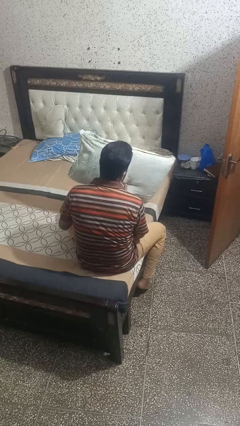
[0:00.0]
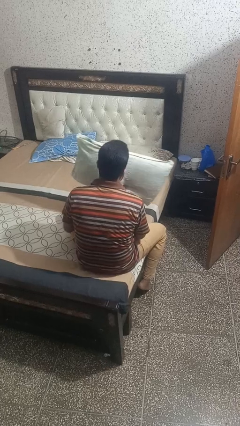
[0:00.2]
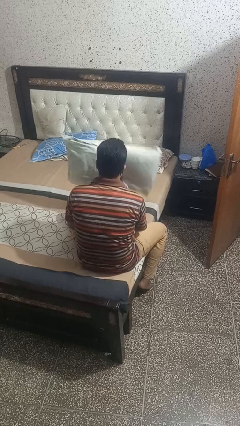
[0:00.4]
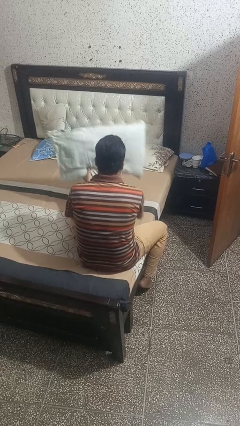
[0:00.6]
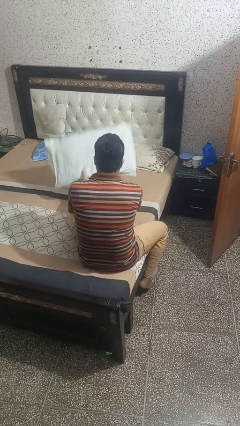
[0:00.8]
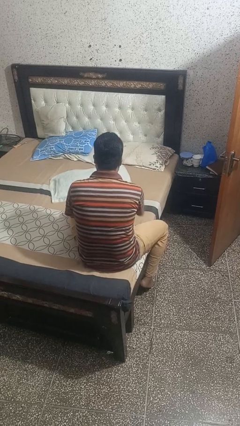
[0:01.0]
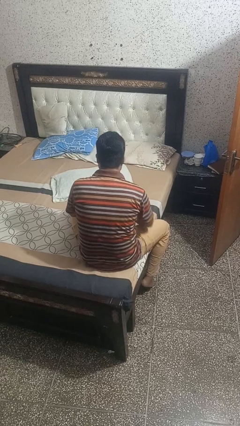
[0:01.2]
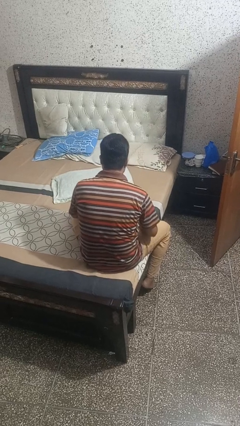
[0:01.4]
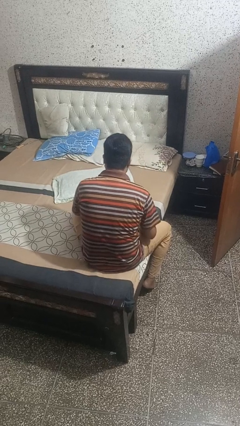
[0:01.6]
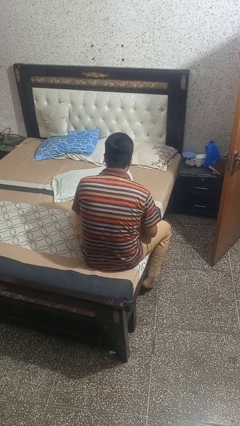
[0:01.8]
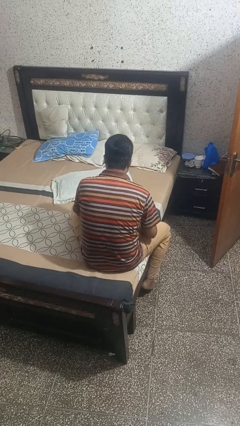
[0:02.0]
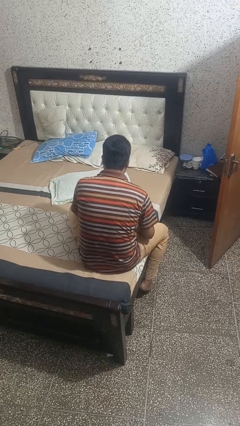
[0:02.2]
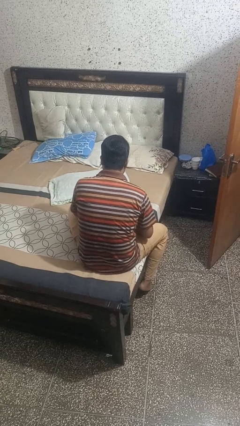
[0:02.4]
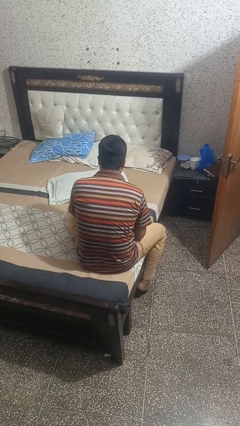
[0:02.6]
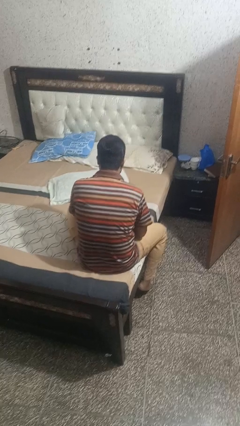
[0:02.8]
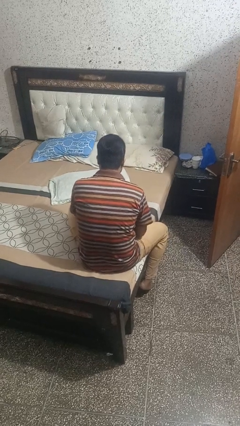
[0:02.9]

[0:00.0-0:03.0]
person puts down object on bed

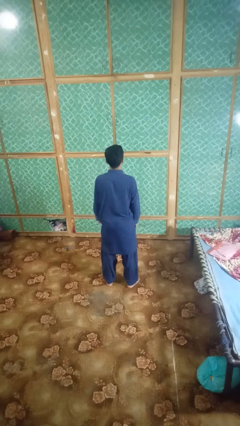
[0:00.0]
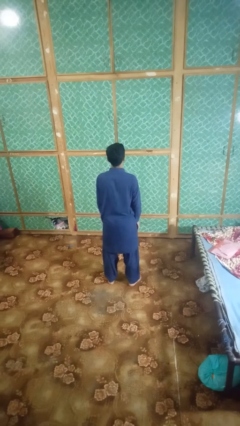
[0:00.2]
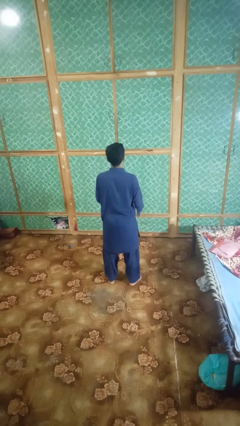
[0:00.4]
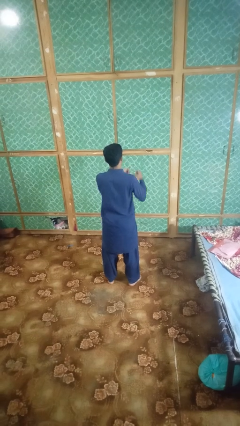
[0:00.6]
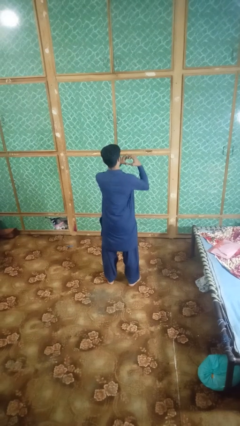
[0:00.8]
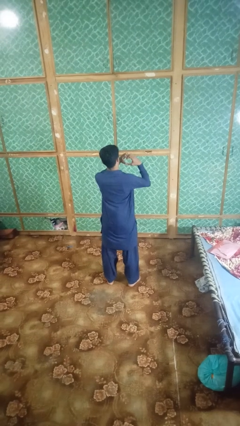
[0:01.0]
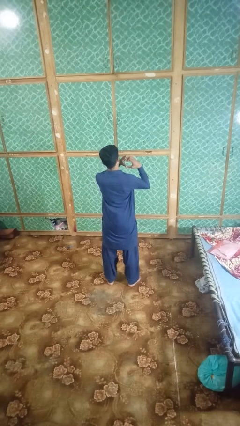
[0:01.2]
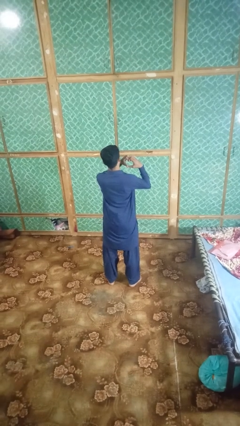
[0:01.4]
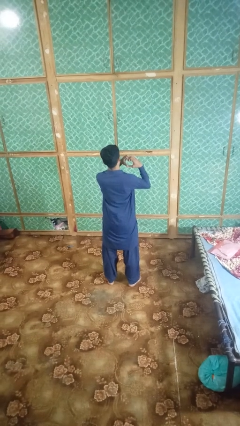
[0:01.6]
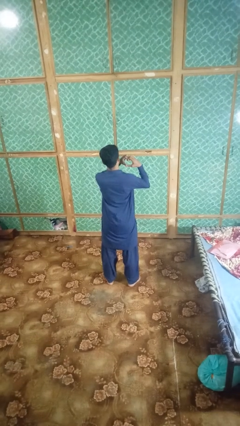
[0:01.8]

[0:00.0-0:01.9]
person gestures heart

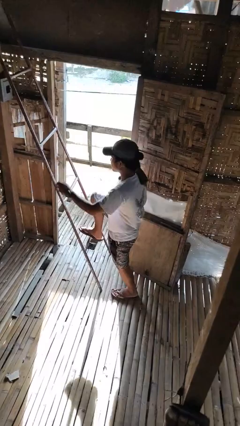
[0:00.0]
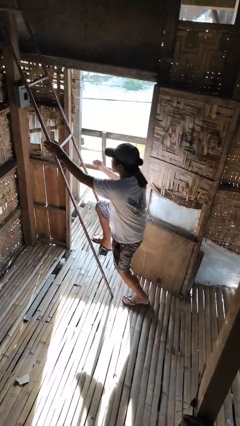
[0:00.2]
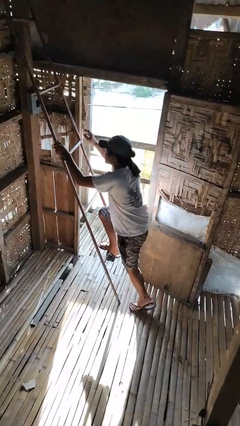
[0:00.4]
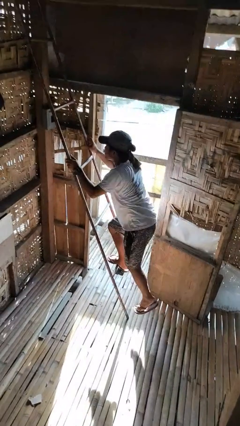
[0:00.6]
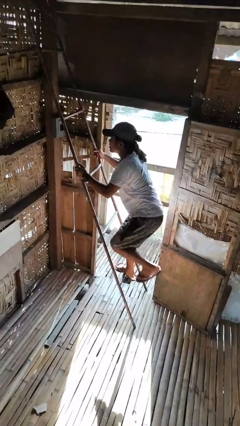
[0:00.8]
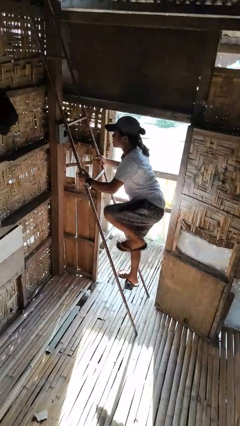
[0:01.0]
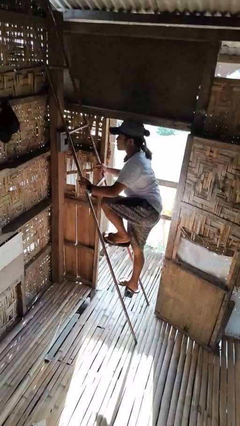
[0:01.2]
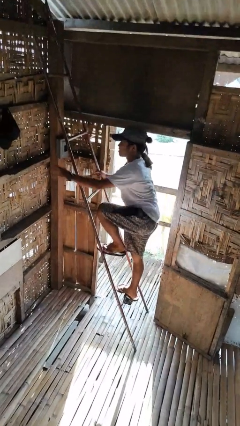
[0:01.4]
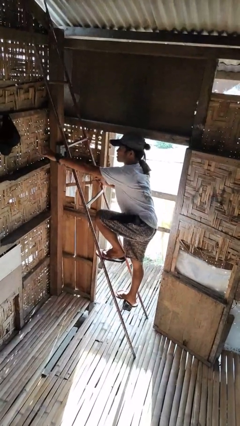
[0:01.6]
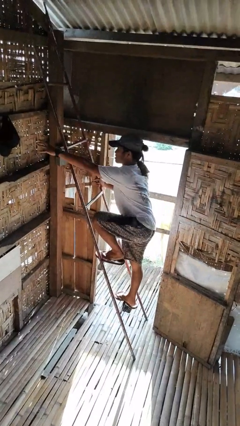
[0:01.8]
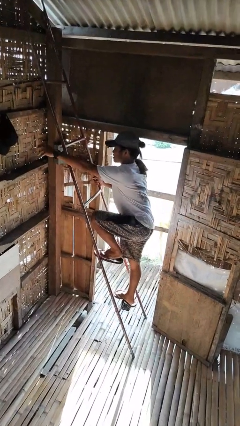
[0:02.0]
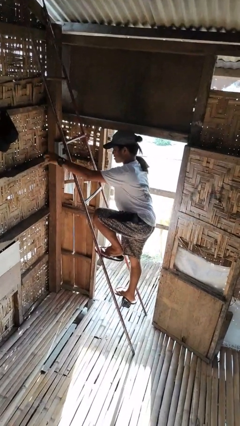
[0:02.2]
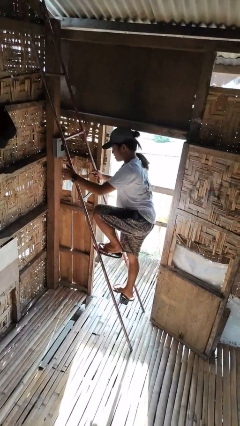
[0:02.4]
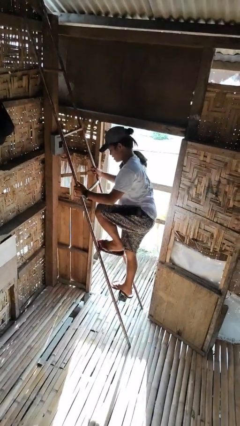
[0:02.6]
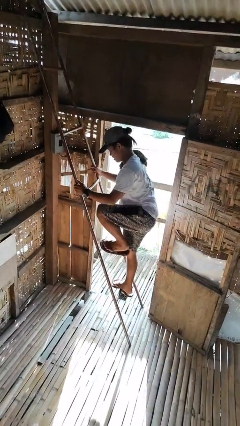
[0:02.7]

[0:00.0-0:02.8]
person climbs up ladder

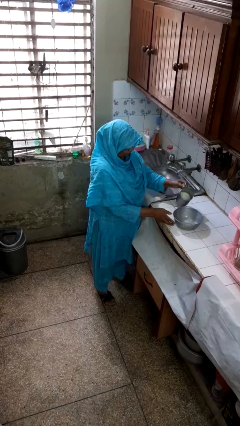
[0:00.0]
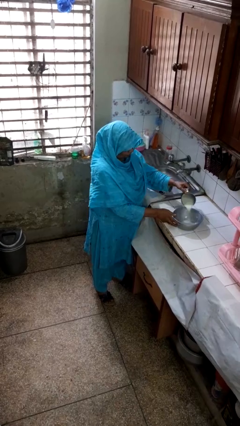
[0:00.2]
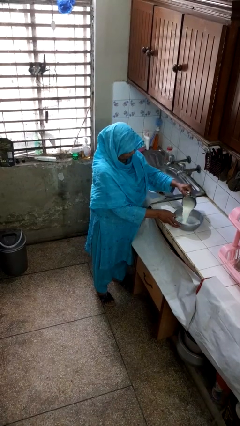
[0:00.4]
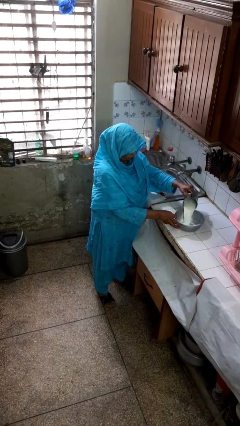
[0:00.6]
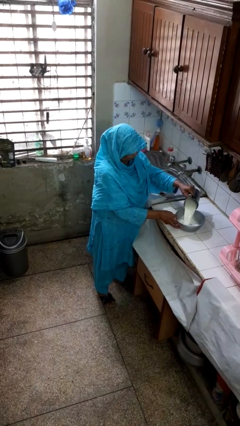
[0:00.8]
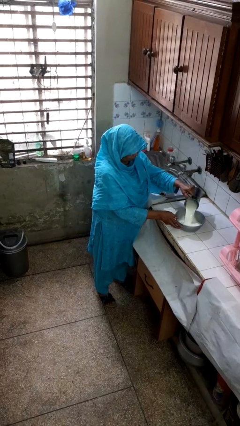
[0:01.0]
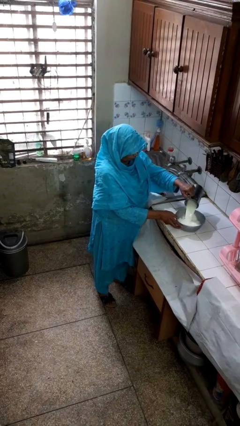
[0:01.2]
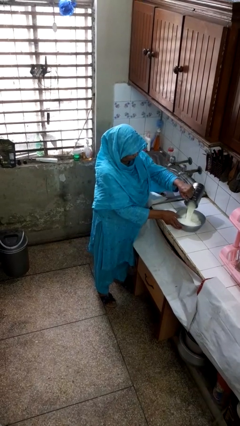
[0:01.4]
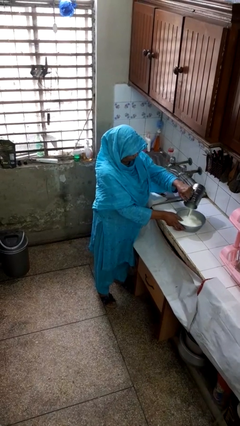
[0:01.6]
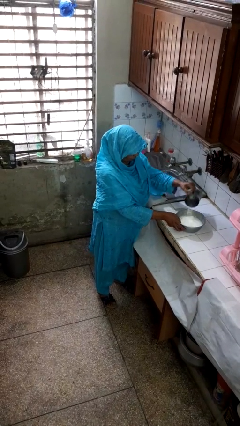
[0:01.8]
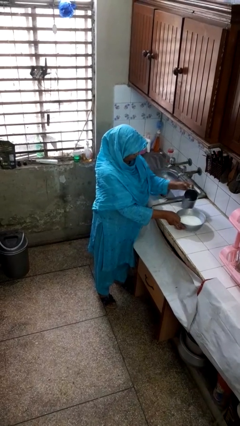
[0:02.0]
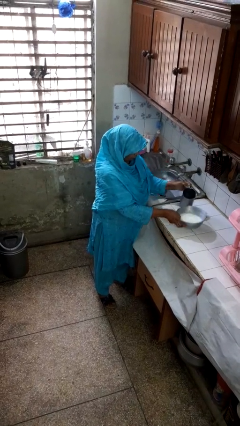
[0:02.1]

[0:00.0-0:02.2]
person pours into bowl

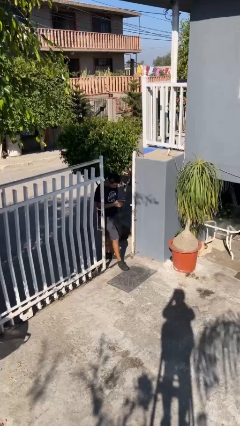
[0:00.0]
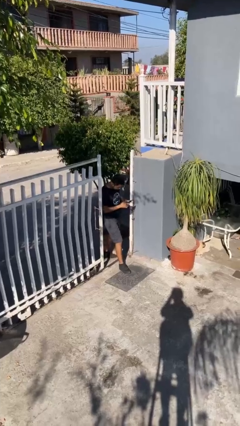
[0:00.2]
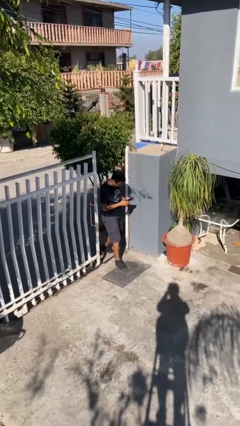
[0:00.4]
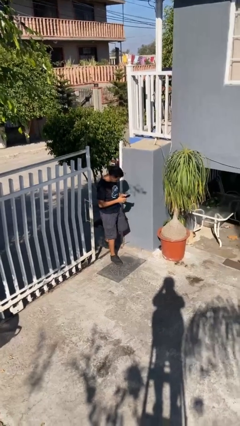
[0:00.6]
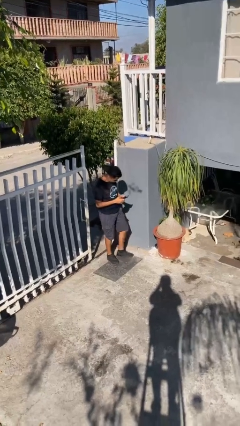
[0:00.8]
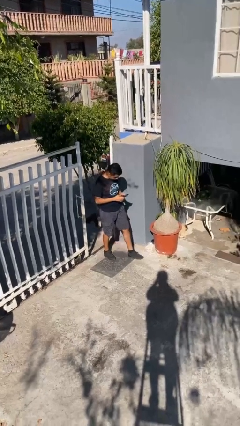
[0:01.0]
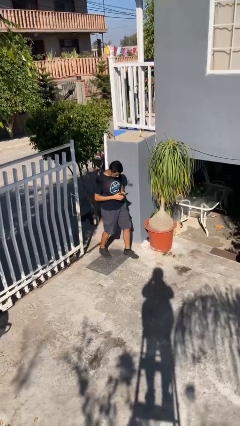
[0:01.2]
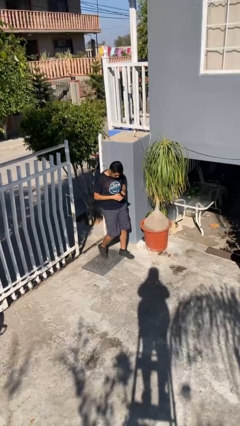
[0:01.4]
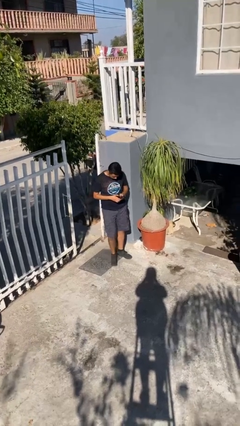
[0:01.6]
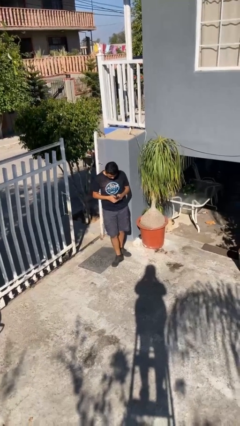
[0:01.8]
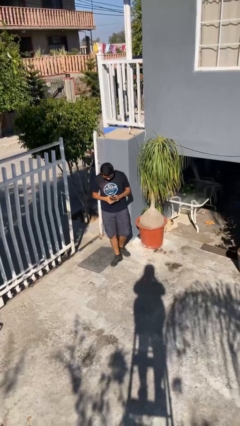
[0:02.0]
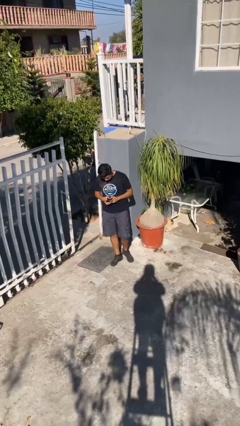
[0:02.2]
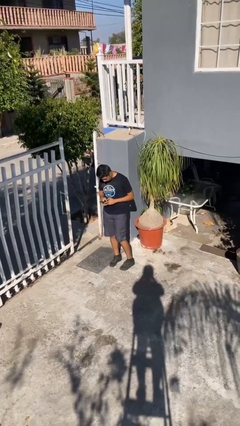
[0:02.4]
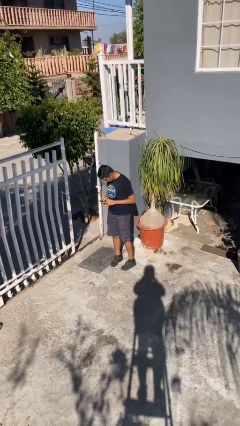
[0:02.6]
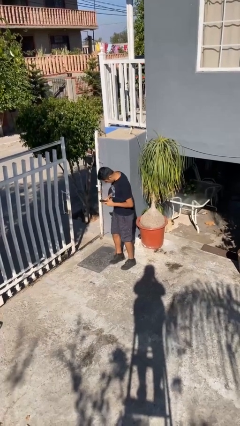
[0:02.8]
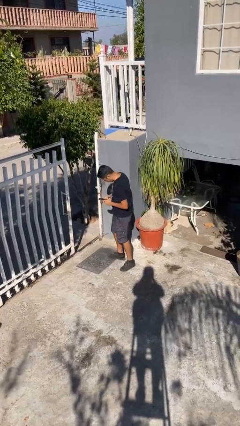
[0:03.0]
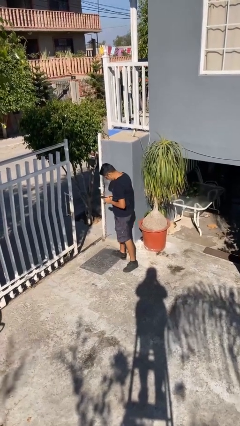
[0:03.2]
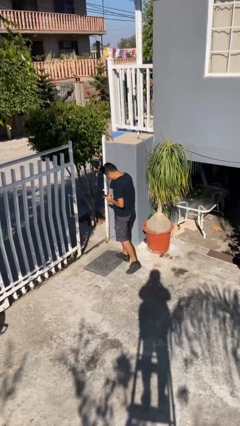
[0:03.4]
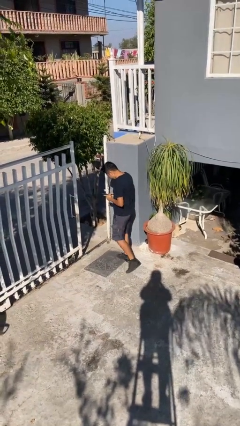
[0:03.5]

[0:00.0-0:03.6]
person enters scene through structure

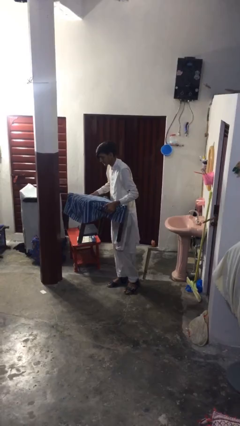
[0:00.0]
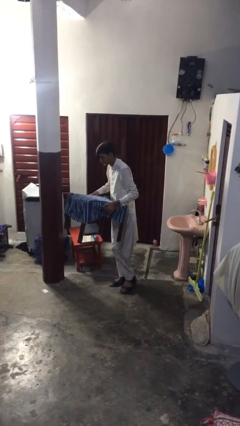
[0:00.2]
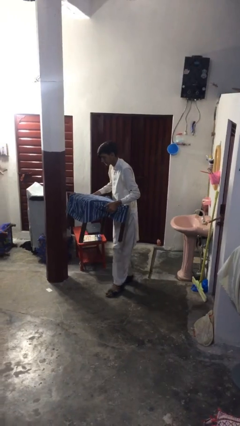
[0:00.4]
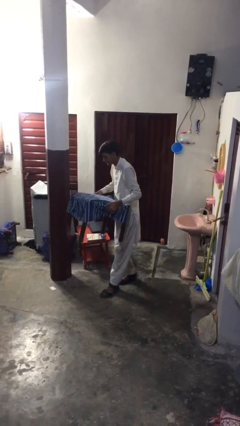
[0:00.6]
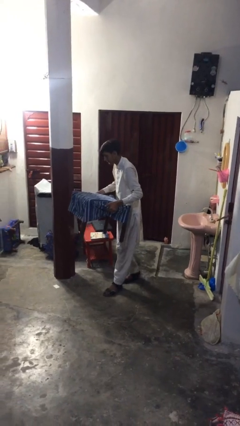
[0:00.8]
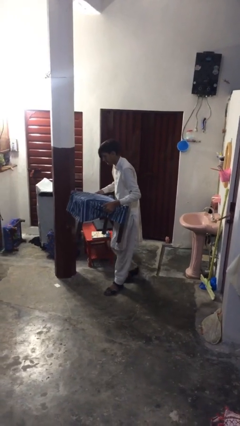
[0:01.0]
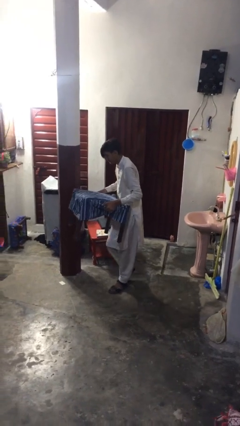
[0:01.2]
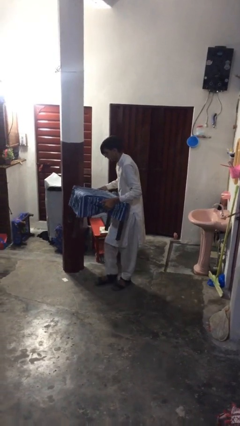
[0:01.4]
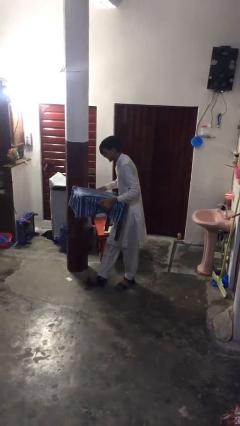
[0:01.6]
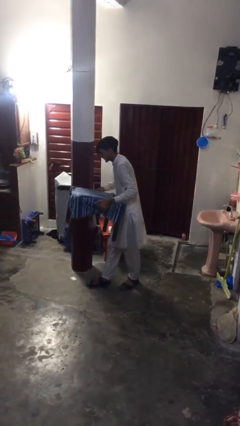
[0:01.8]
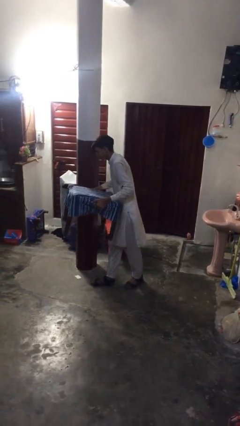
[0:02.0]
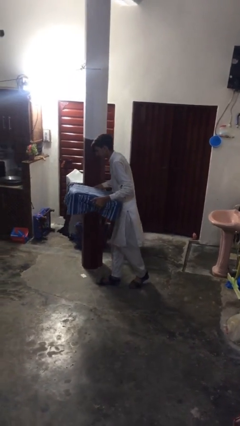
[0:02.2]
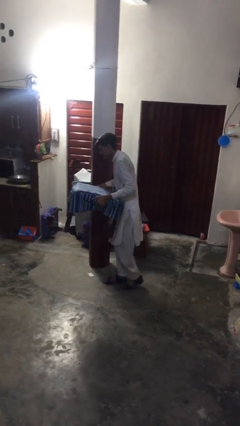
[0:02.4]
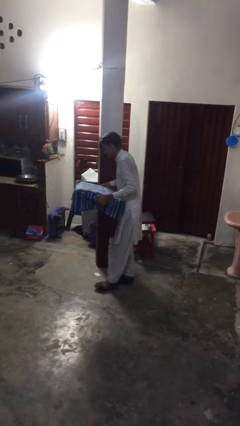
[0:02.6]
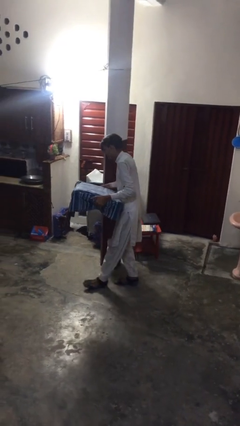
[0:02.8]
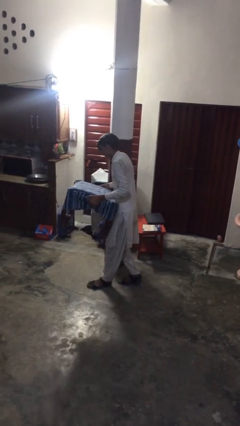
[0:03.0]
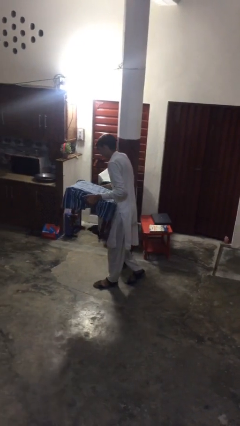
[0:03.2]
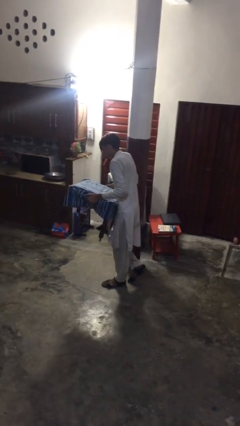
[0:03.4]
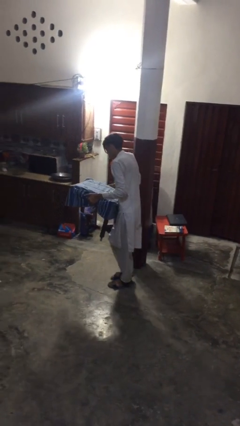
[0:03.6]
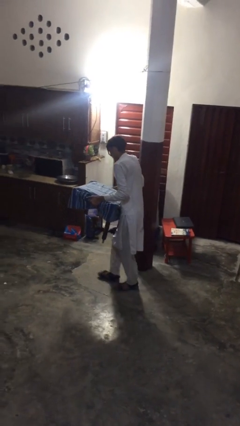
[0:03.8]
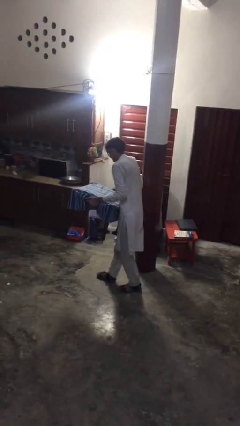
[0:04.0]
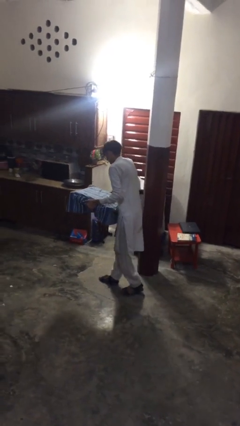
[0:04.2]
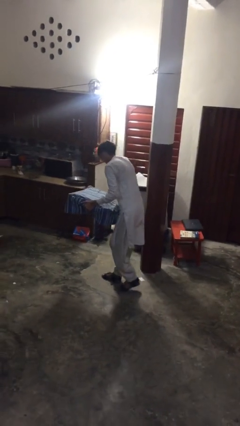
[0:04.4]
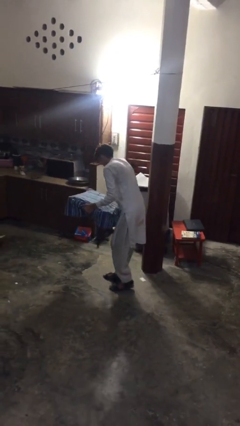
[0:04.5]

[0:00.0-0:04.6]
person carries heavy object
